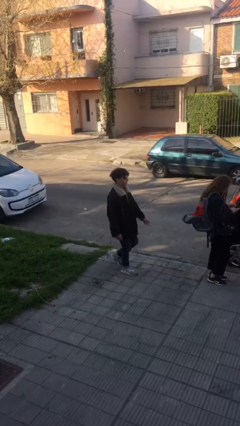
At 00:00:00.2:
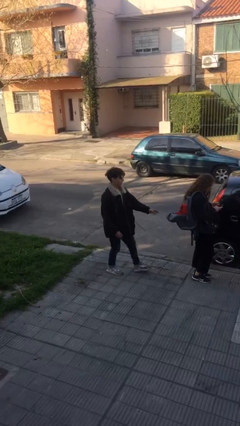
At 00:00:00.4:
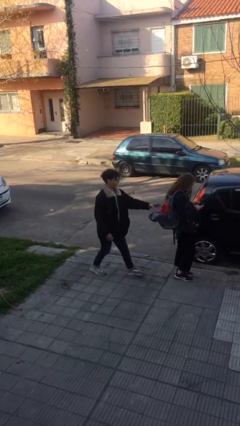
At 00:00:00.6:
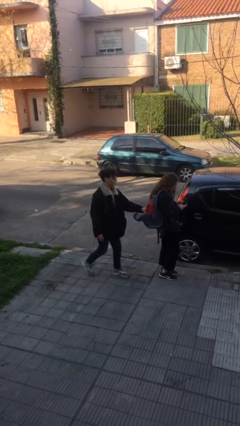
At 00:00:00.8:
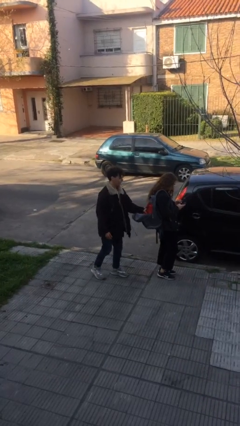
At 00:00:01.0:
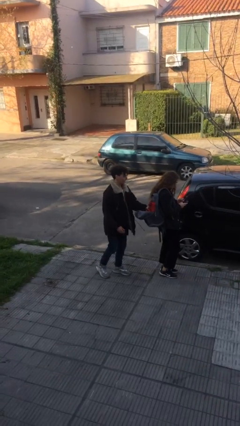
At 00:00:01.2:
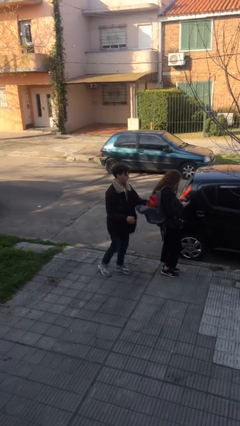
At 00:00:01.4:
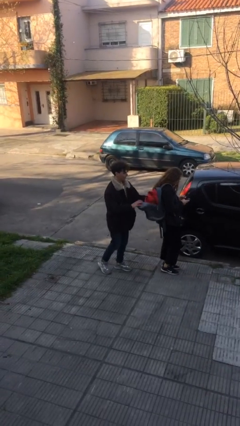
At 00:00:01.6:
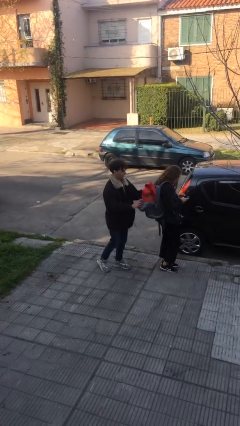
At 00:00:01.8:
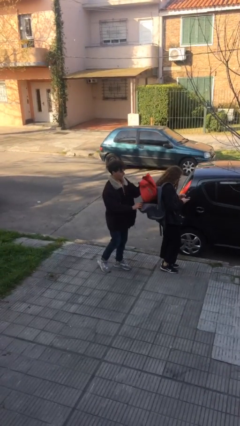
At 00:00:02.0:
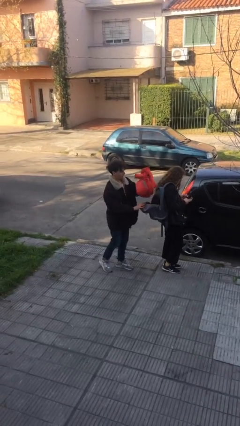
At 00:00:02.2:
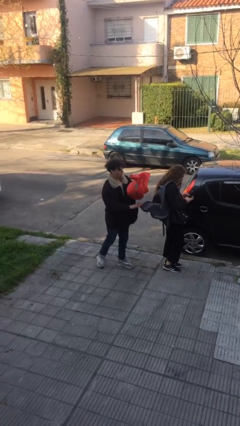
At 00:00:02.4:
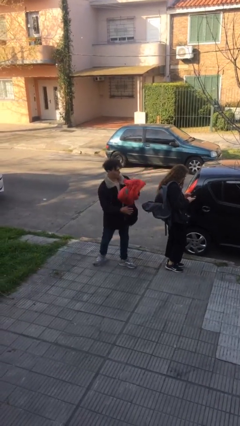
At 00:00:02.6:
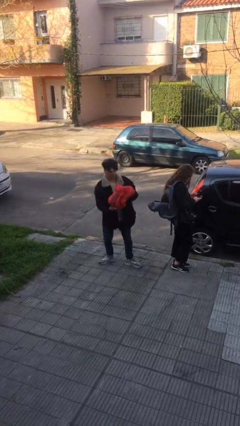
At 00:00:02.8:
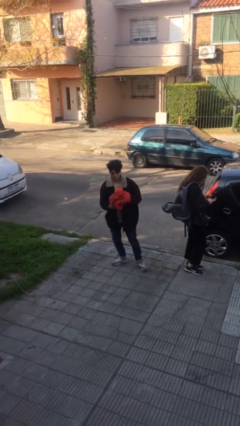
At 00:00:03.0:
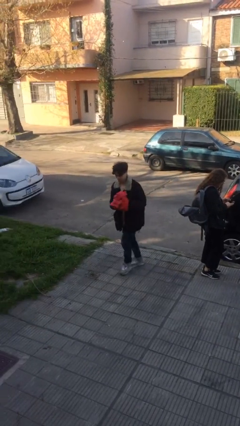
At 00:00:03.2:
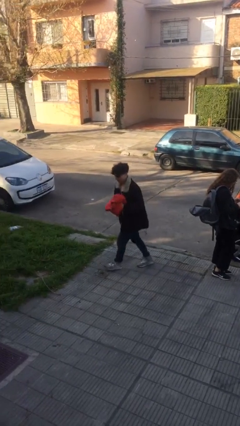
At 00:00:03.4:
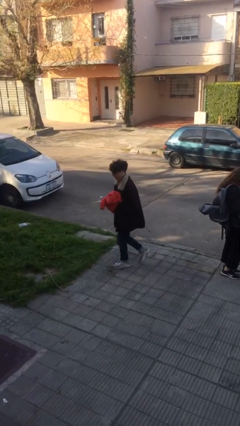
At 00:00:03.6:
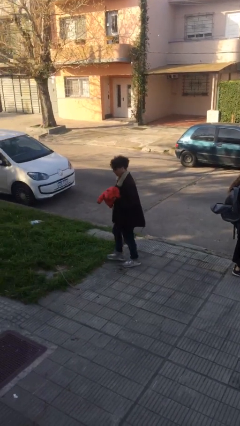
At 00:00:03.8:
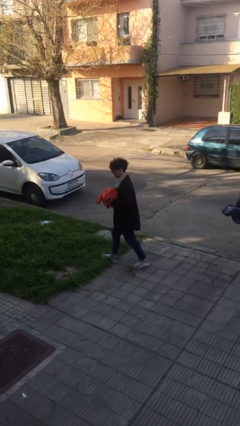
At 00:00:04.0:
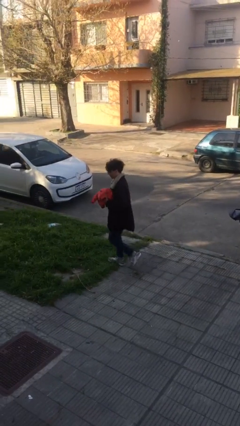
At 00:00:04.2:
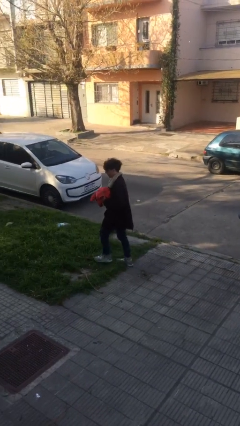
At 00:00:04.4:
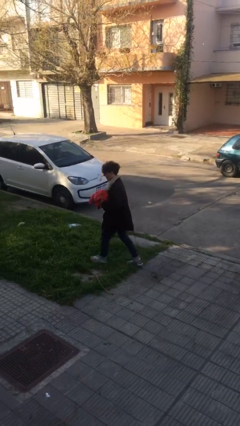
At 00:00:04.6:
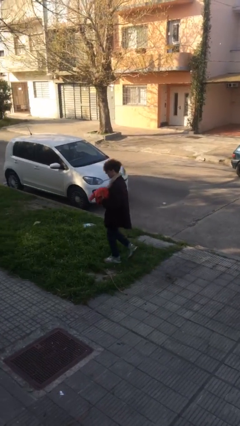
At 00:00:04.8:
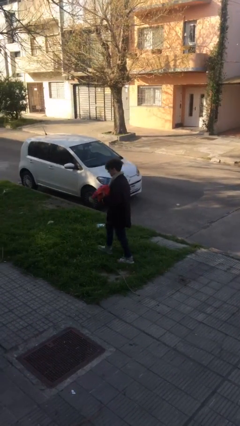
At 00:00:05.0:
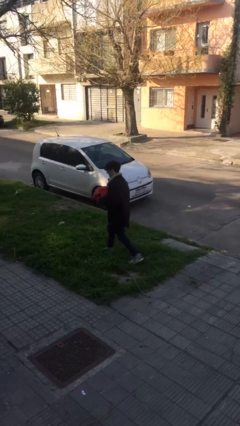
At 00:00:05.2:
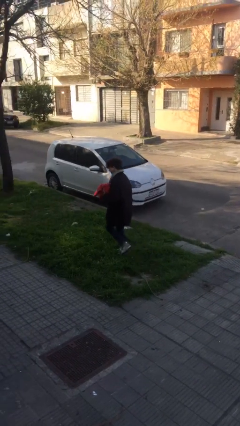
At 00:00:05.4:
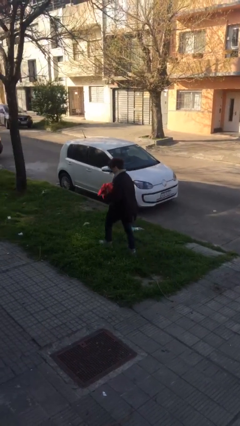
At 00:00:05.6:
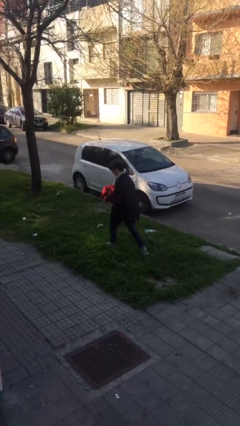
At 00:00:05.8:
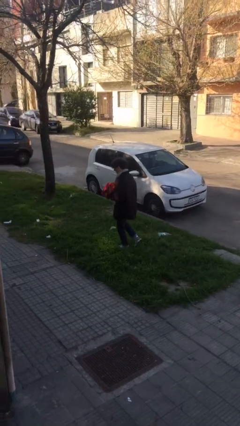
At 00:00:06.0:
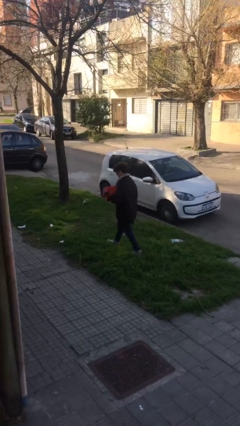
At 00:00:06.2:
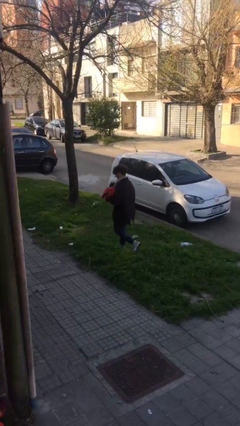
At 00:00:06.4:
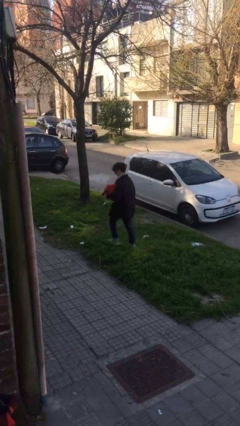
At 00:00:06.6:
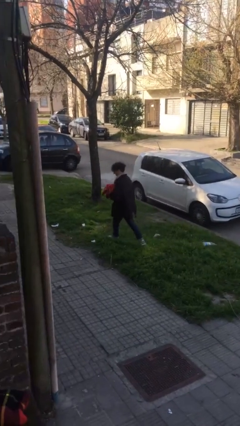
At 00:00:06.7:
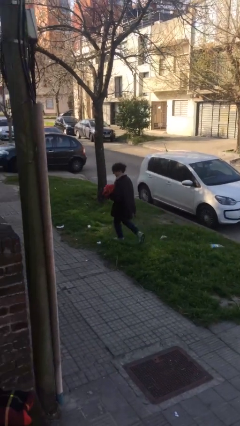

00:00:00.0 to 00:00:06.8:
person steals object from person

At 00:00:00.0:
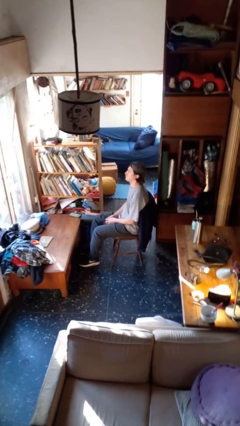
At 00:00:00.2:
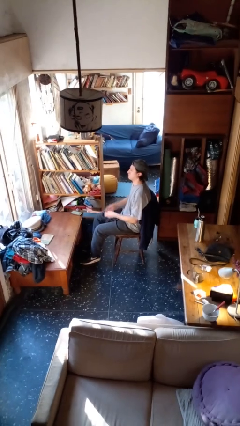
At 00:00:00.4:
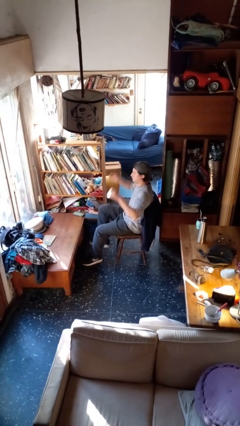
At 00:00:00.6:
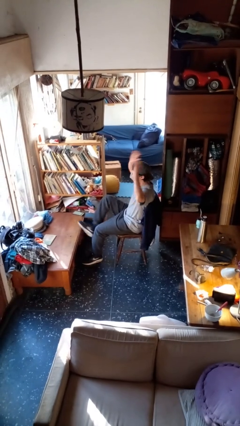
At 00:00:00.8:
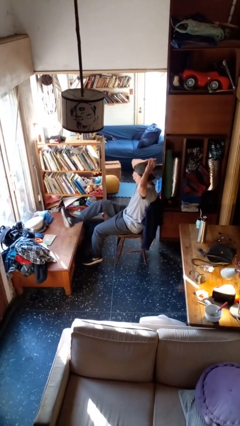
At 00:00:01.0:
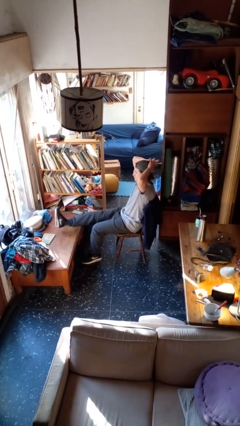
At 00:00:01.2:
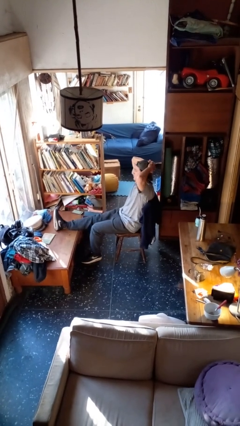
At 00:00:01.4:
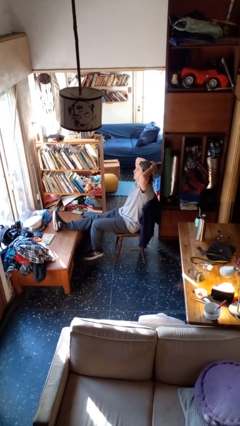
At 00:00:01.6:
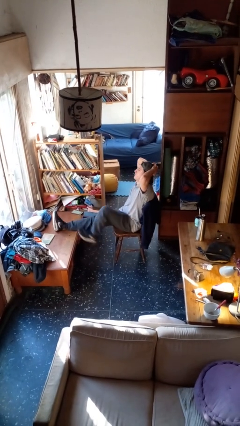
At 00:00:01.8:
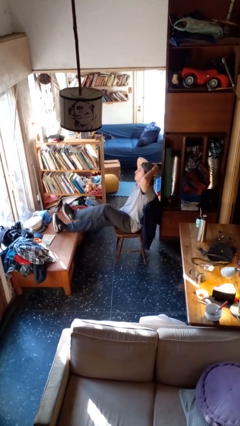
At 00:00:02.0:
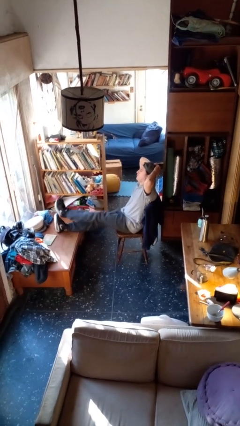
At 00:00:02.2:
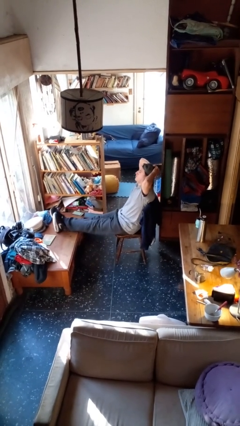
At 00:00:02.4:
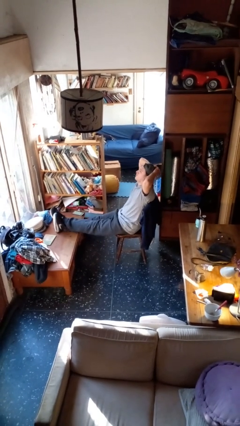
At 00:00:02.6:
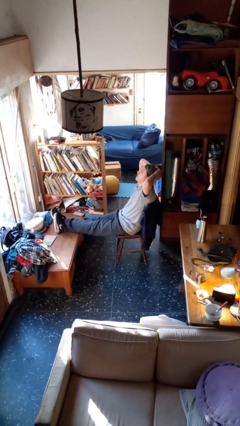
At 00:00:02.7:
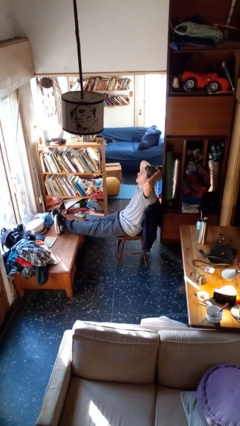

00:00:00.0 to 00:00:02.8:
person puts feet up

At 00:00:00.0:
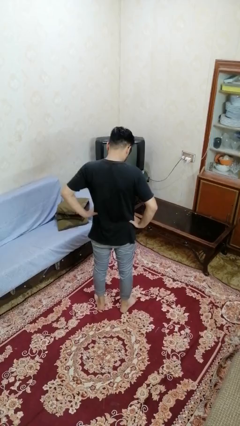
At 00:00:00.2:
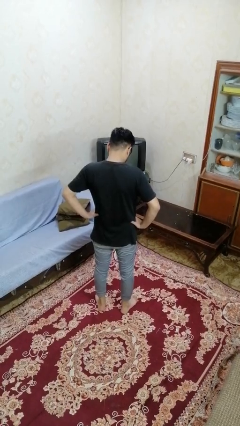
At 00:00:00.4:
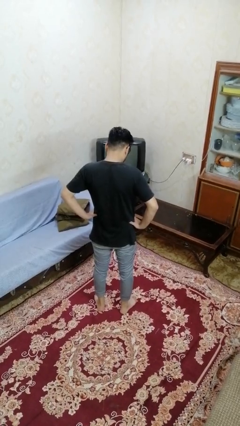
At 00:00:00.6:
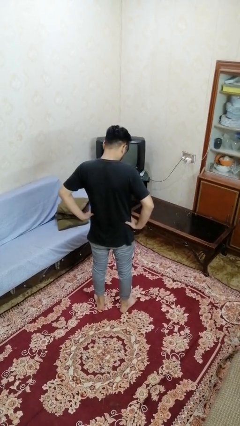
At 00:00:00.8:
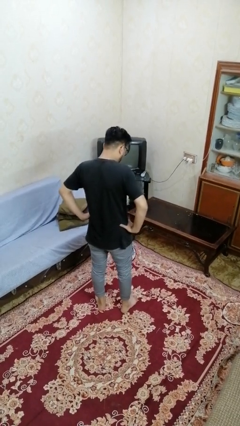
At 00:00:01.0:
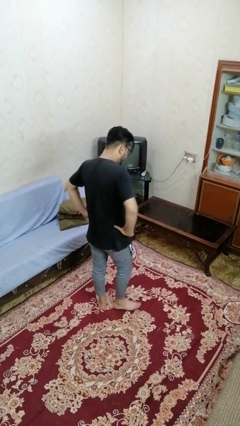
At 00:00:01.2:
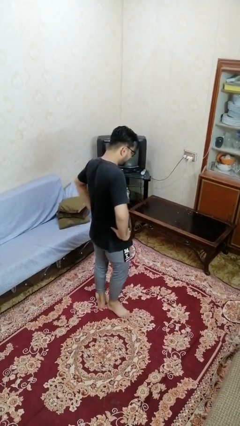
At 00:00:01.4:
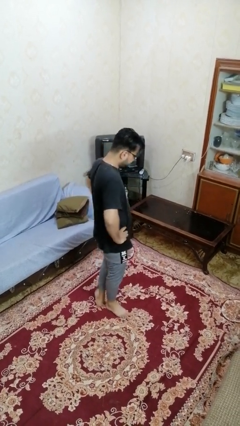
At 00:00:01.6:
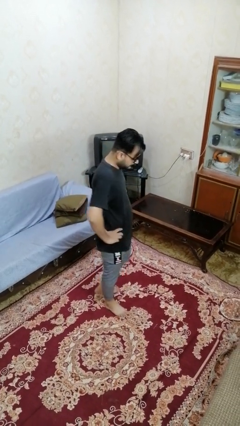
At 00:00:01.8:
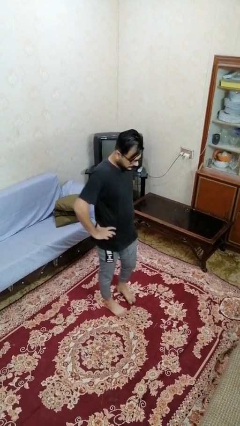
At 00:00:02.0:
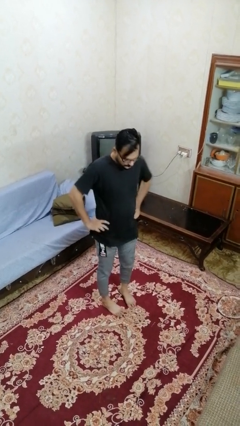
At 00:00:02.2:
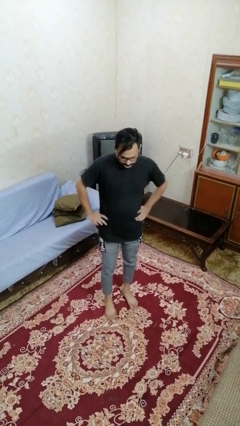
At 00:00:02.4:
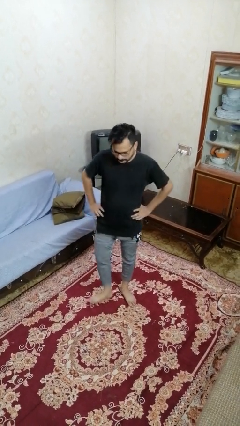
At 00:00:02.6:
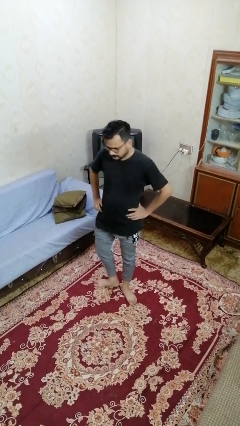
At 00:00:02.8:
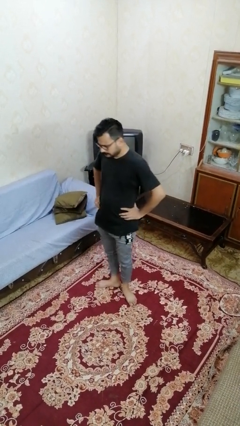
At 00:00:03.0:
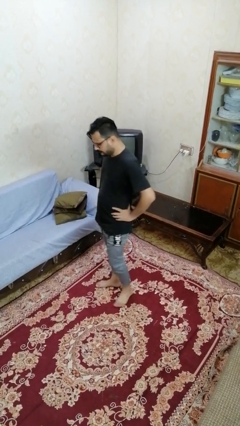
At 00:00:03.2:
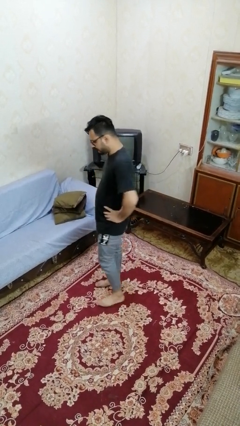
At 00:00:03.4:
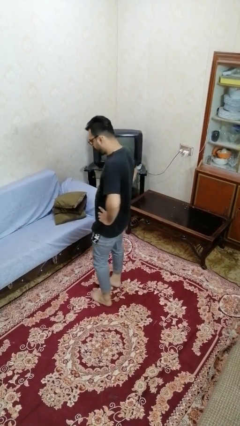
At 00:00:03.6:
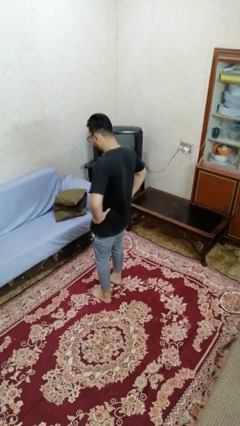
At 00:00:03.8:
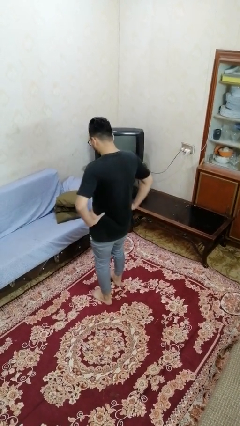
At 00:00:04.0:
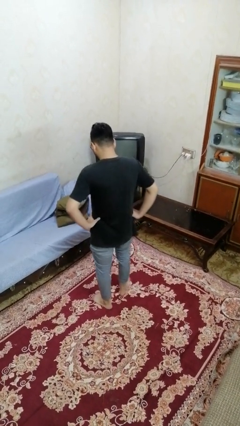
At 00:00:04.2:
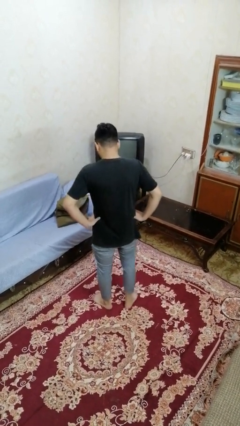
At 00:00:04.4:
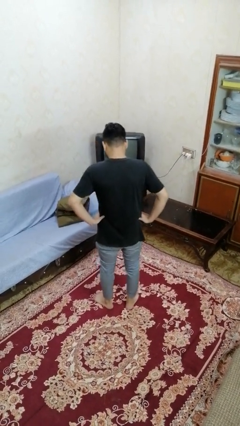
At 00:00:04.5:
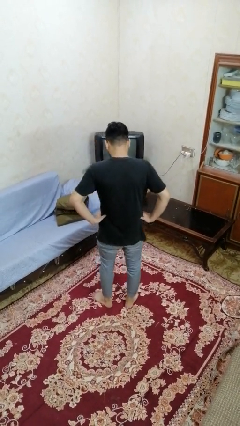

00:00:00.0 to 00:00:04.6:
person twirls

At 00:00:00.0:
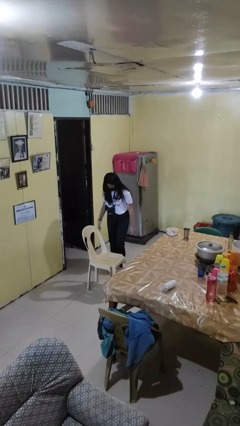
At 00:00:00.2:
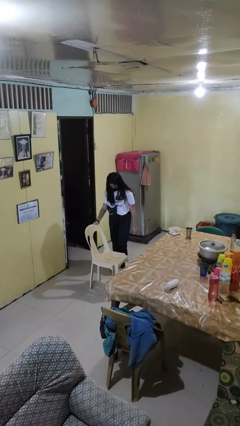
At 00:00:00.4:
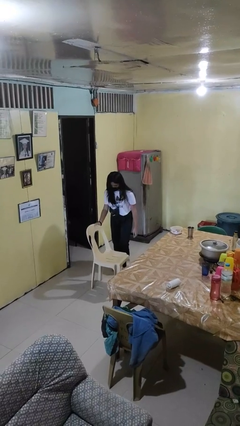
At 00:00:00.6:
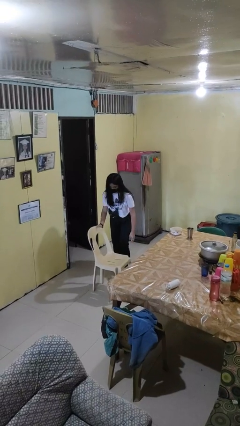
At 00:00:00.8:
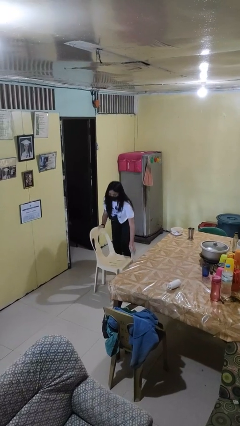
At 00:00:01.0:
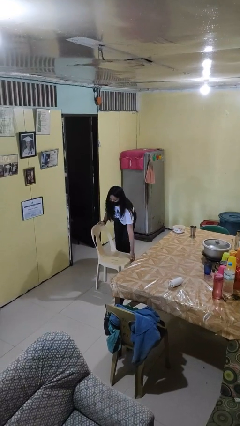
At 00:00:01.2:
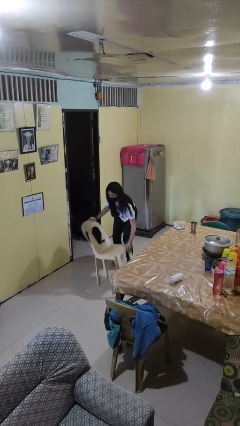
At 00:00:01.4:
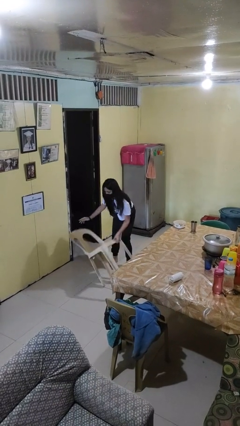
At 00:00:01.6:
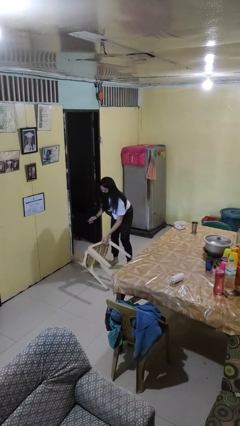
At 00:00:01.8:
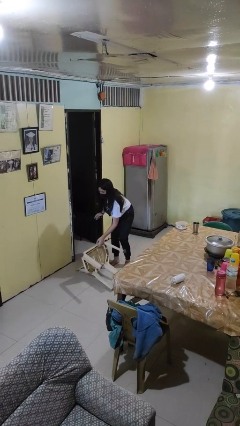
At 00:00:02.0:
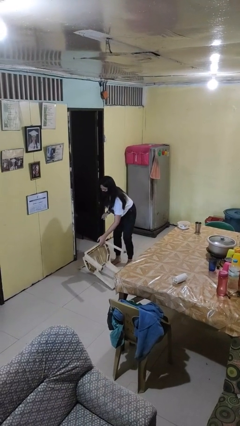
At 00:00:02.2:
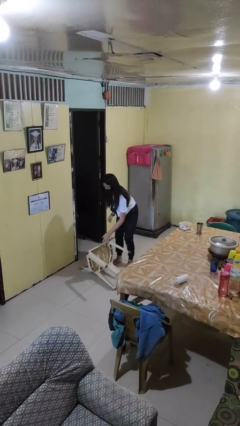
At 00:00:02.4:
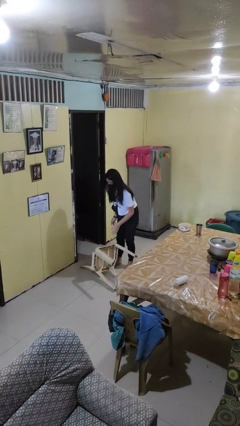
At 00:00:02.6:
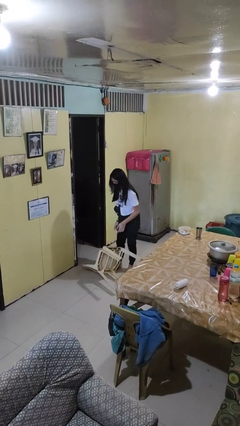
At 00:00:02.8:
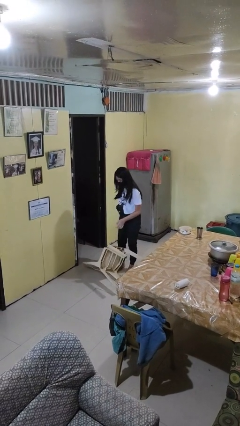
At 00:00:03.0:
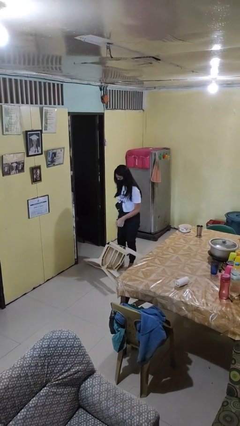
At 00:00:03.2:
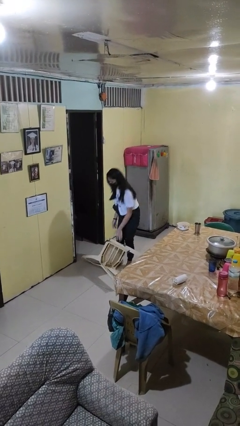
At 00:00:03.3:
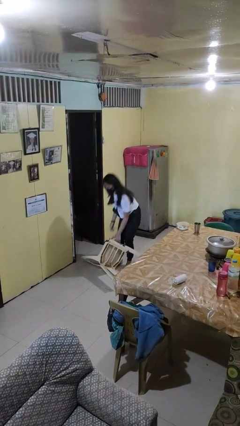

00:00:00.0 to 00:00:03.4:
person knocks over furniture
